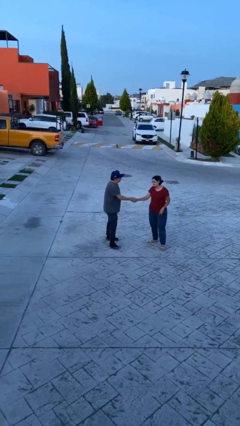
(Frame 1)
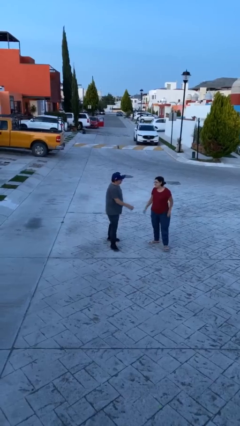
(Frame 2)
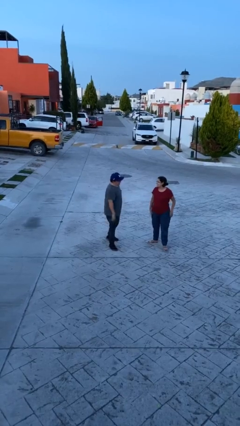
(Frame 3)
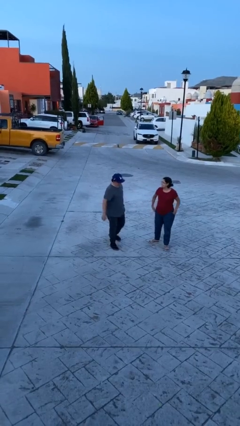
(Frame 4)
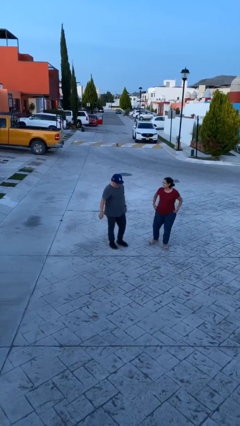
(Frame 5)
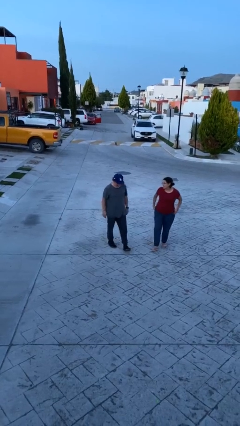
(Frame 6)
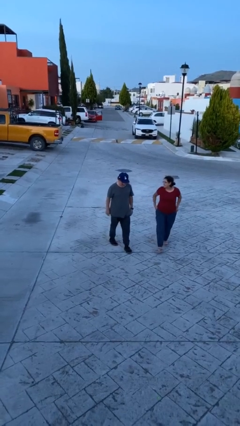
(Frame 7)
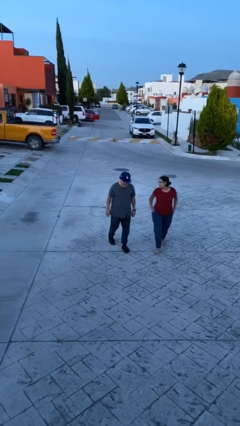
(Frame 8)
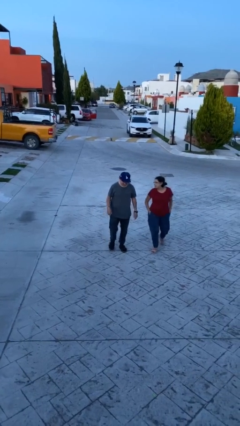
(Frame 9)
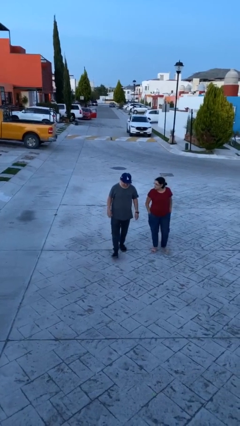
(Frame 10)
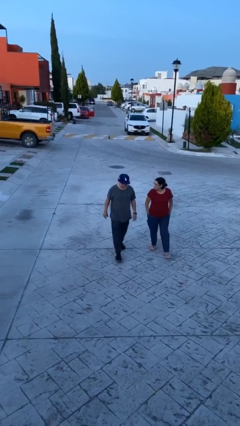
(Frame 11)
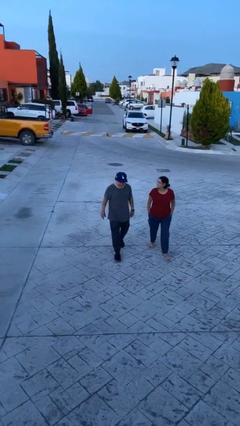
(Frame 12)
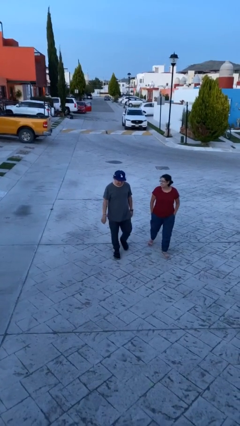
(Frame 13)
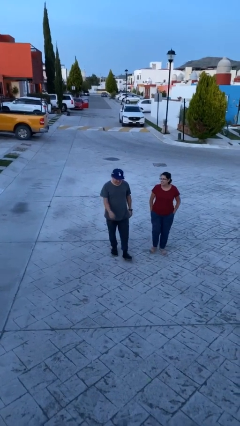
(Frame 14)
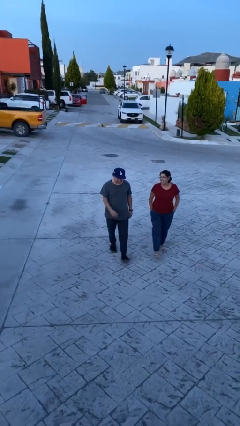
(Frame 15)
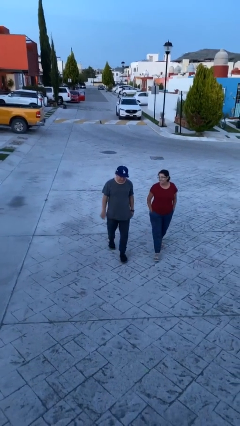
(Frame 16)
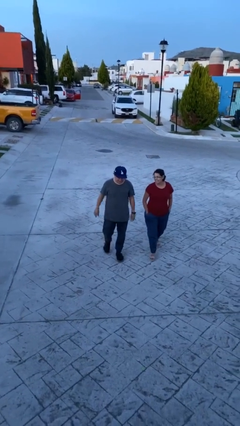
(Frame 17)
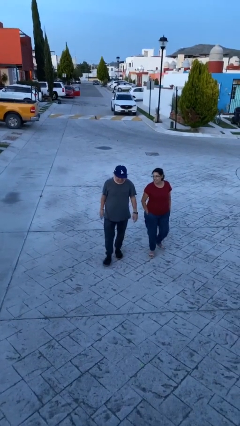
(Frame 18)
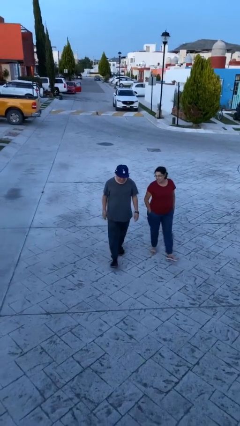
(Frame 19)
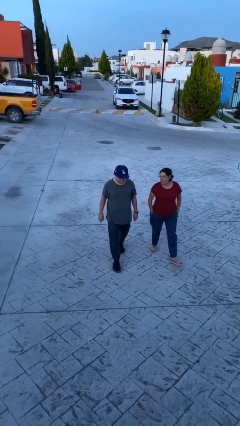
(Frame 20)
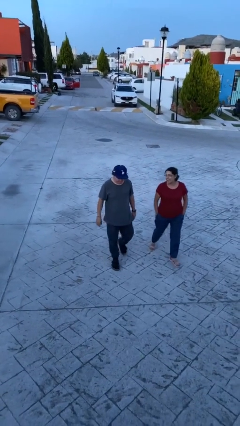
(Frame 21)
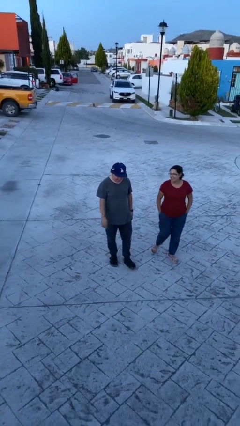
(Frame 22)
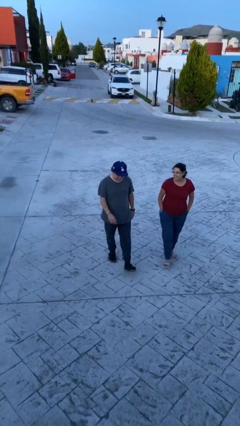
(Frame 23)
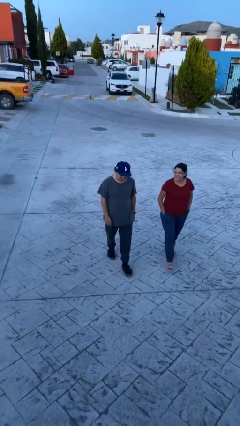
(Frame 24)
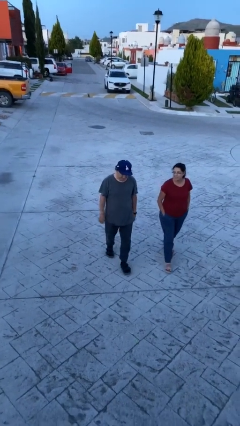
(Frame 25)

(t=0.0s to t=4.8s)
person talks to person

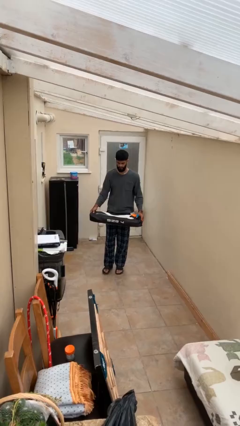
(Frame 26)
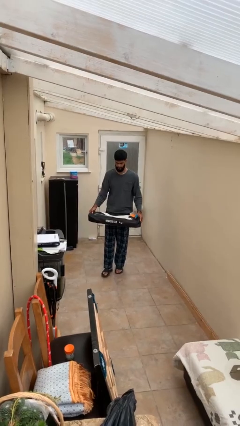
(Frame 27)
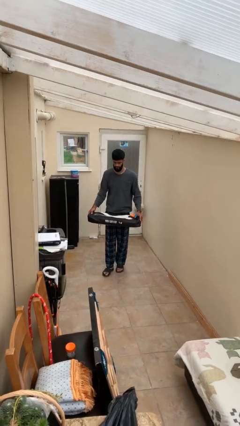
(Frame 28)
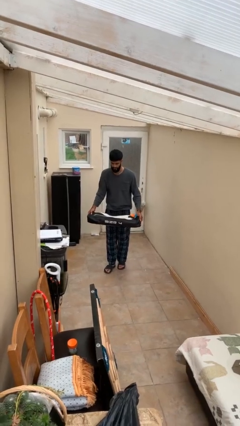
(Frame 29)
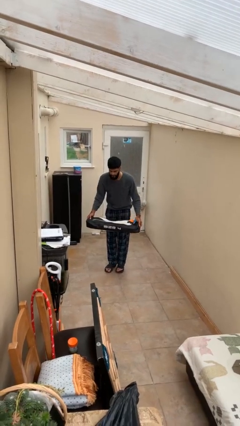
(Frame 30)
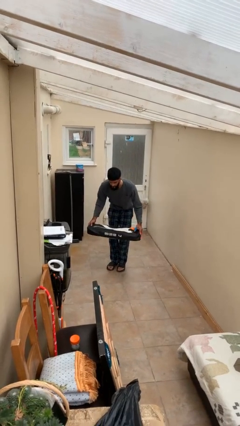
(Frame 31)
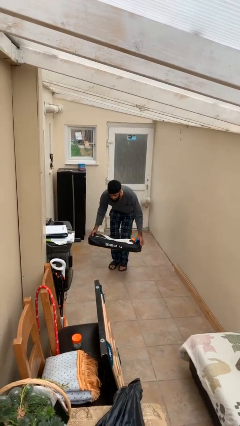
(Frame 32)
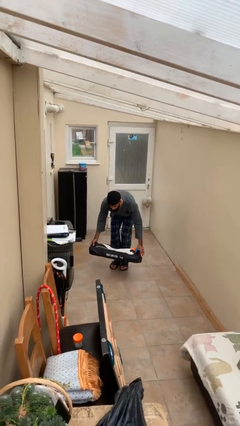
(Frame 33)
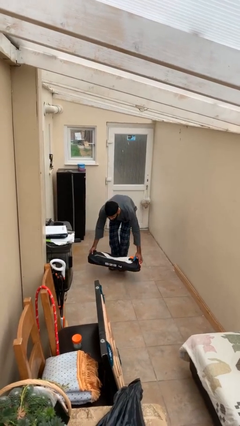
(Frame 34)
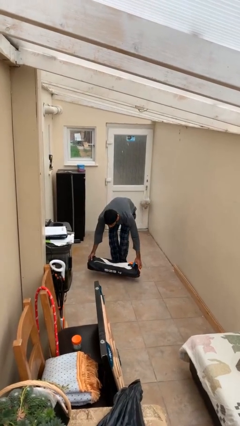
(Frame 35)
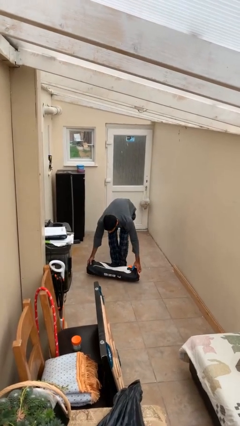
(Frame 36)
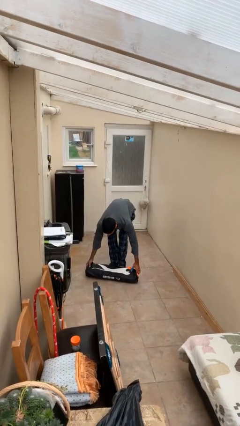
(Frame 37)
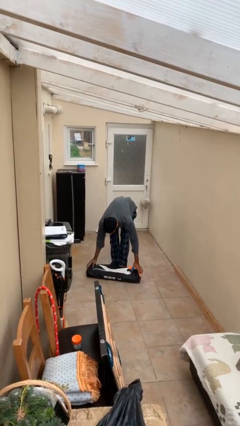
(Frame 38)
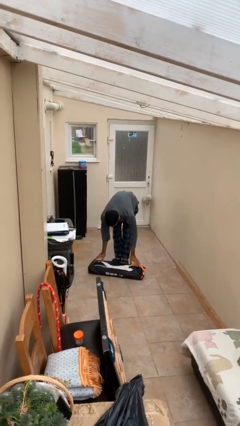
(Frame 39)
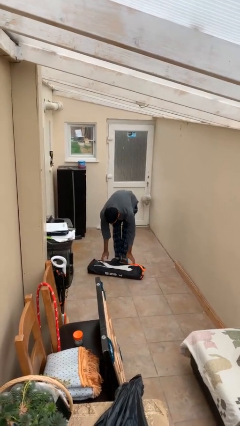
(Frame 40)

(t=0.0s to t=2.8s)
person puts down object on floor

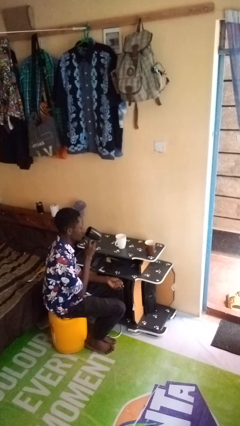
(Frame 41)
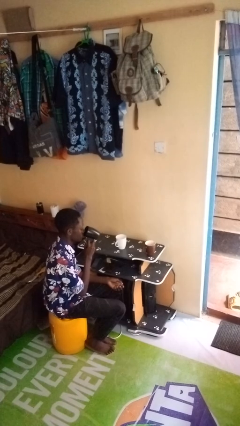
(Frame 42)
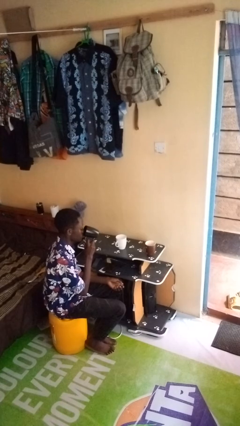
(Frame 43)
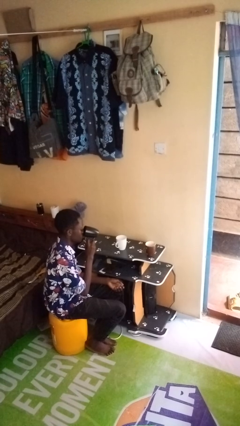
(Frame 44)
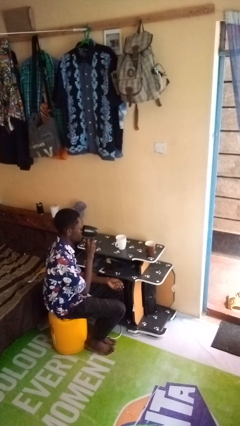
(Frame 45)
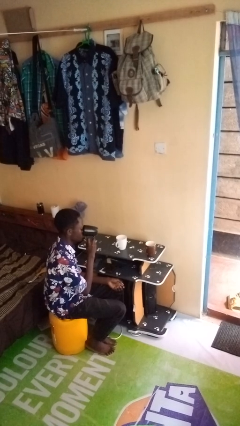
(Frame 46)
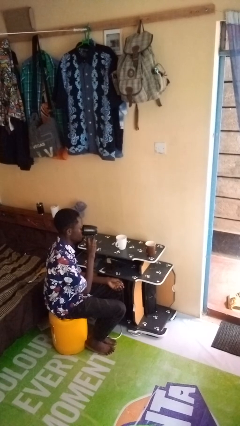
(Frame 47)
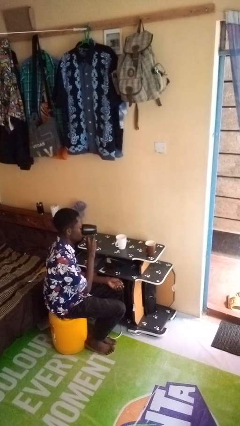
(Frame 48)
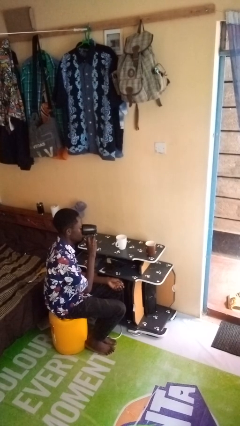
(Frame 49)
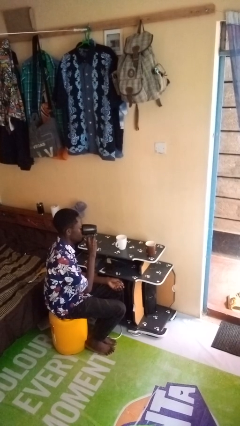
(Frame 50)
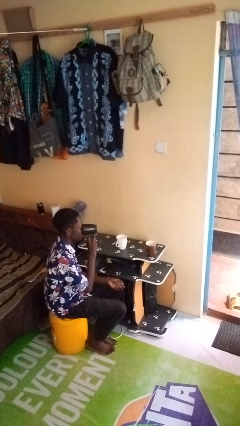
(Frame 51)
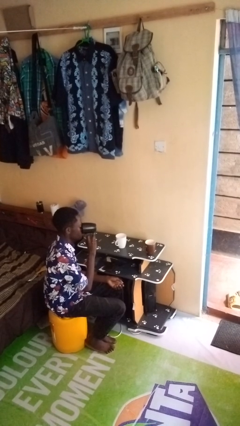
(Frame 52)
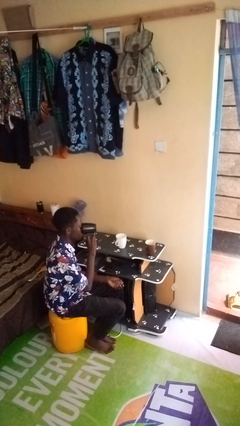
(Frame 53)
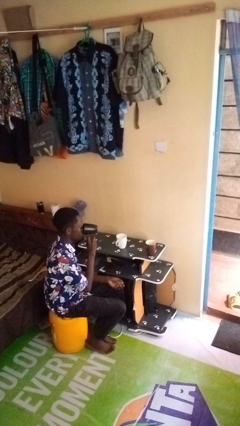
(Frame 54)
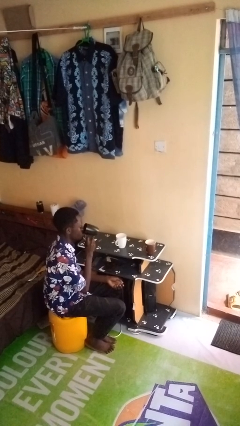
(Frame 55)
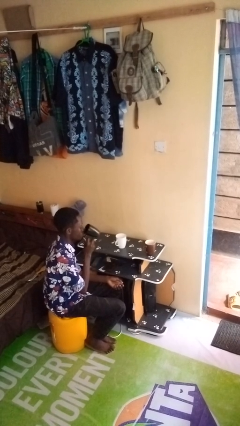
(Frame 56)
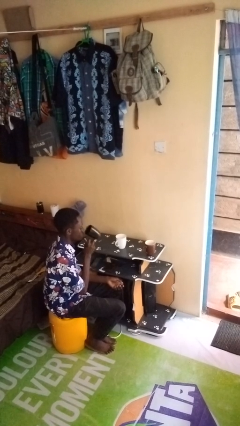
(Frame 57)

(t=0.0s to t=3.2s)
person drinks from shotglass

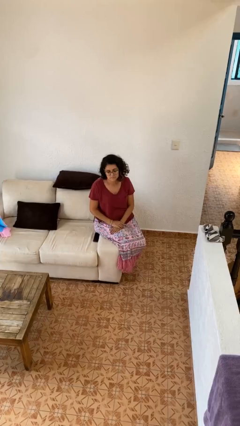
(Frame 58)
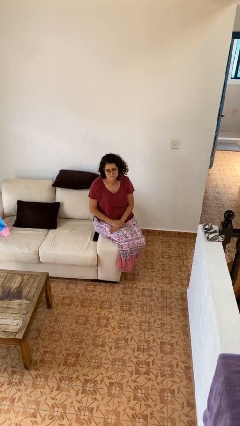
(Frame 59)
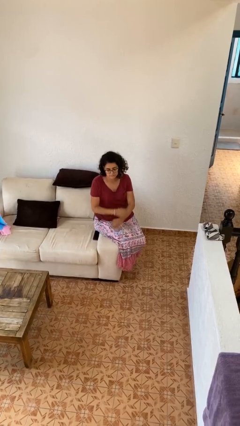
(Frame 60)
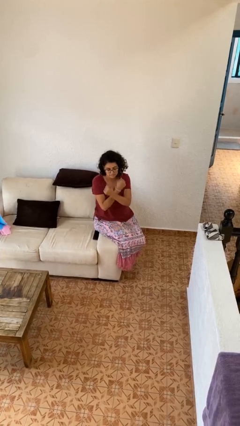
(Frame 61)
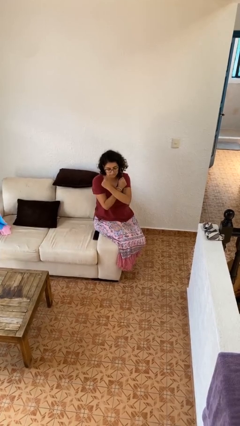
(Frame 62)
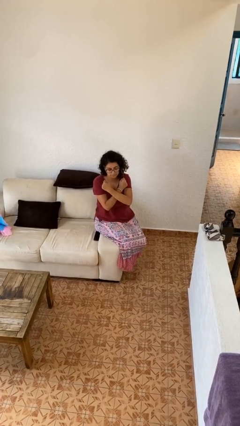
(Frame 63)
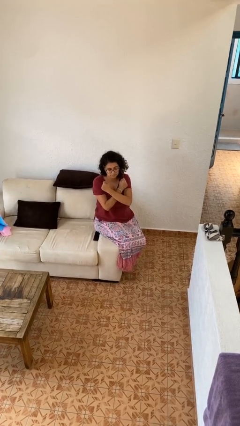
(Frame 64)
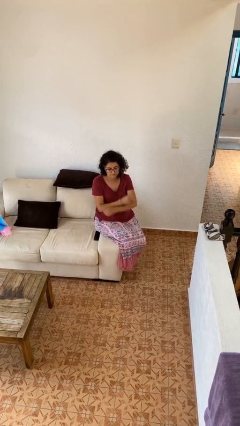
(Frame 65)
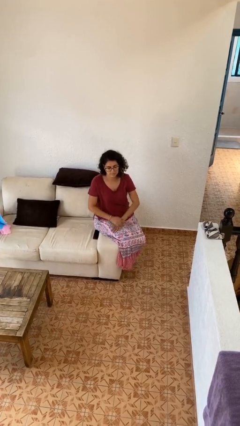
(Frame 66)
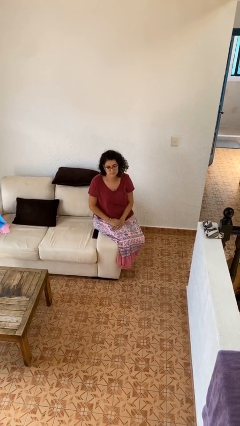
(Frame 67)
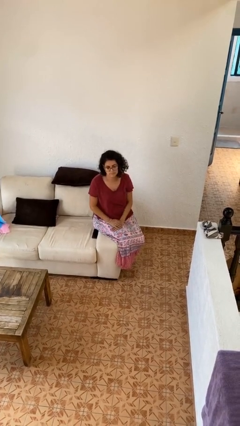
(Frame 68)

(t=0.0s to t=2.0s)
person gestures arms x

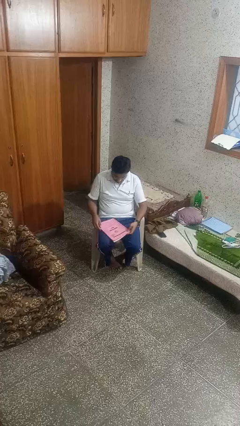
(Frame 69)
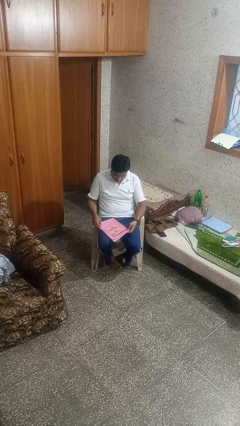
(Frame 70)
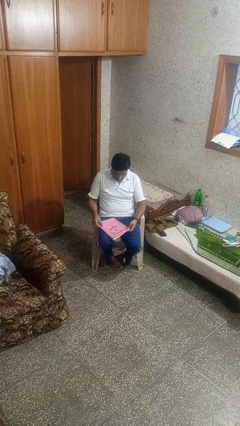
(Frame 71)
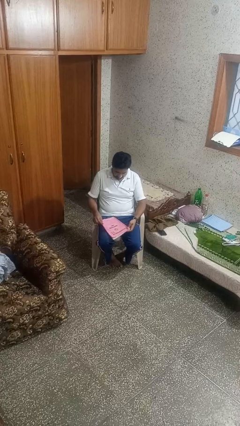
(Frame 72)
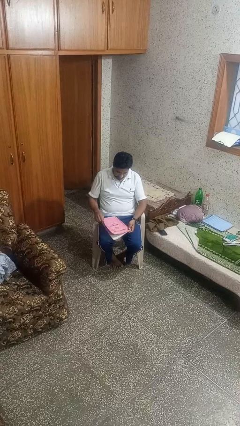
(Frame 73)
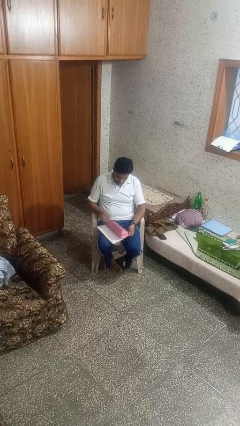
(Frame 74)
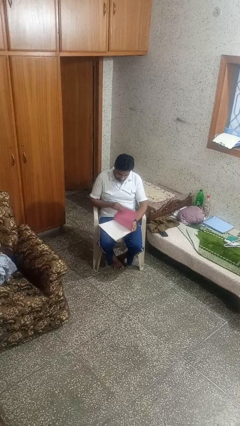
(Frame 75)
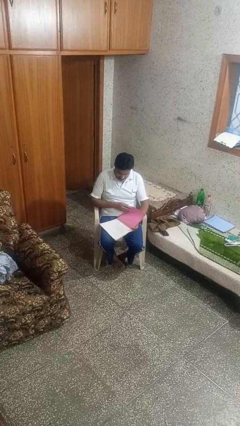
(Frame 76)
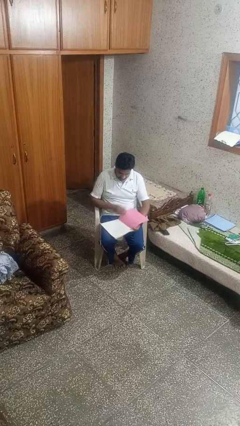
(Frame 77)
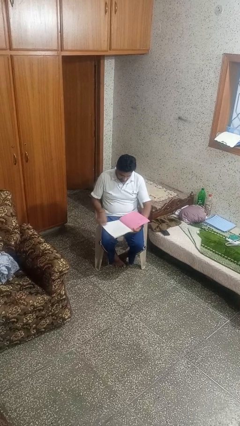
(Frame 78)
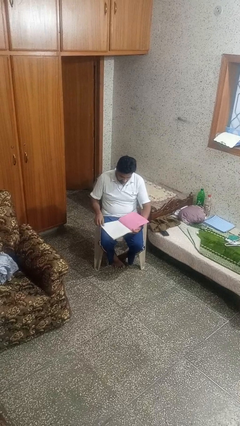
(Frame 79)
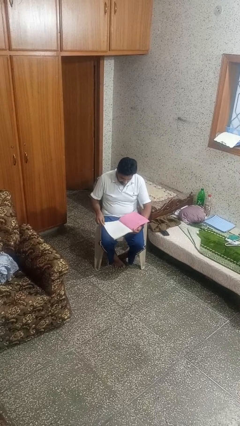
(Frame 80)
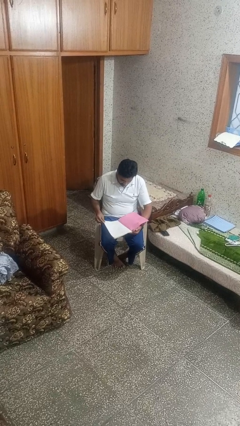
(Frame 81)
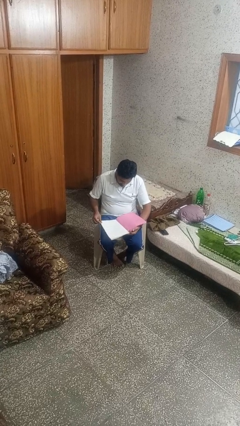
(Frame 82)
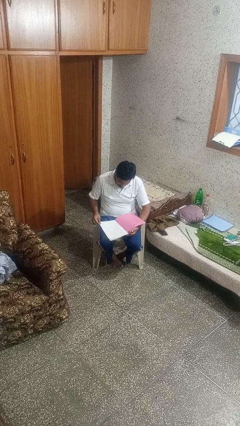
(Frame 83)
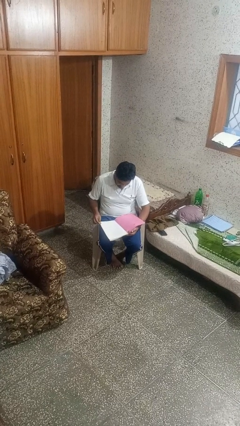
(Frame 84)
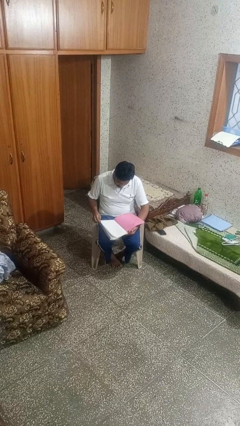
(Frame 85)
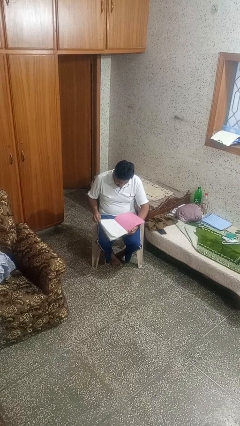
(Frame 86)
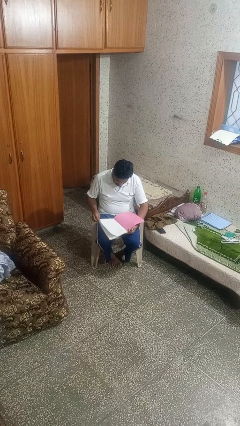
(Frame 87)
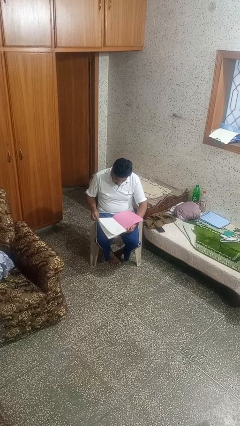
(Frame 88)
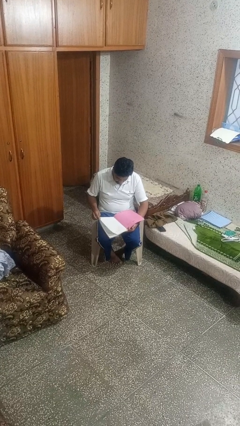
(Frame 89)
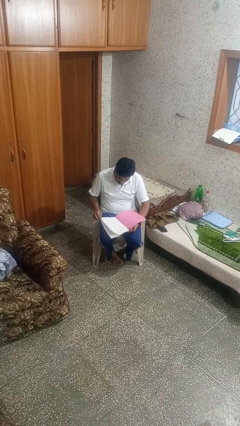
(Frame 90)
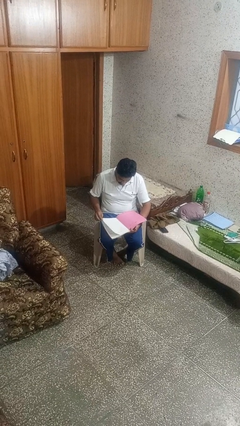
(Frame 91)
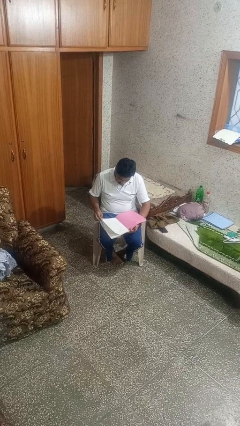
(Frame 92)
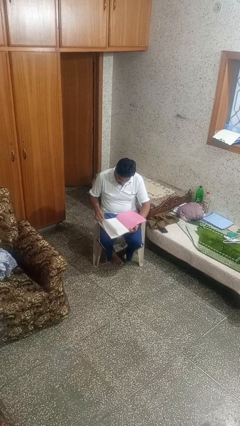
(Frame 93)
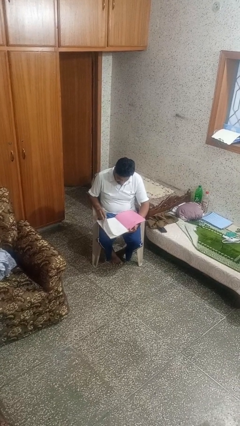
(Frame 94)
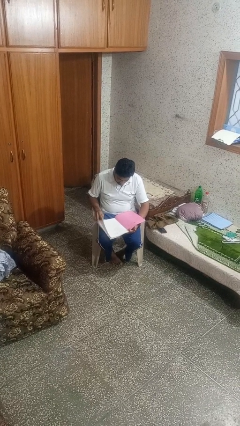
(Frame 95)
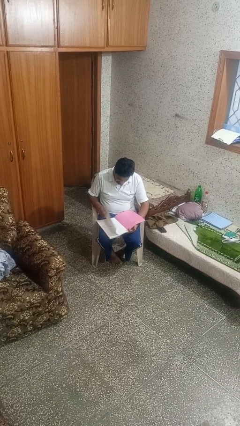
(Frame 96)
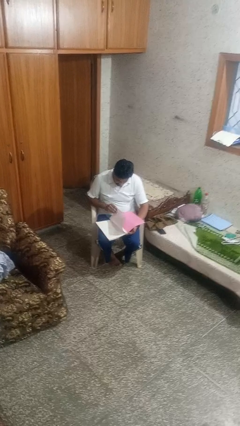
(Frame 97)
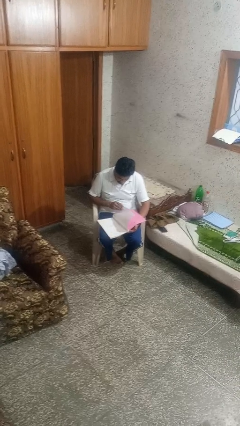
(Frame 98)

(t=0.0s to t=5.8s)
person reads book
